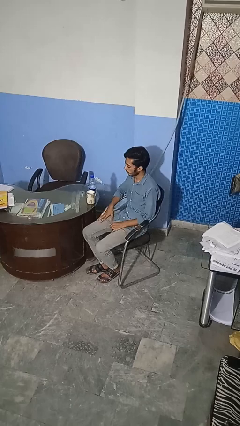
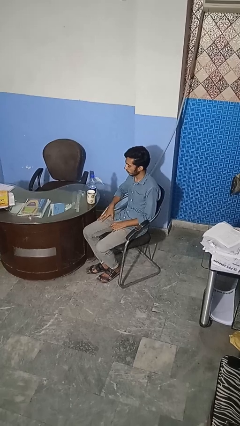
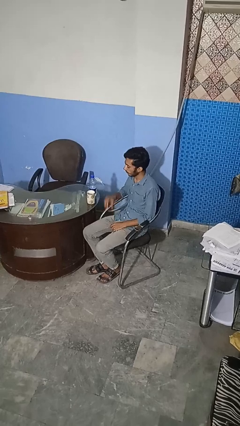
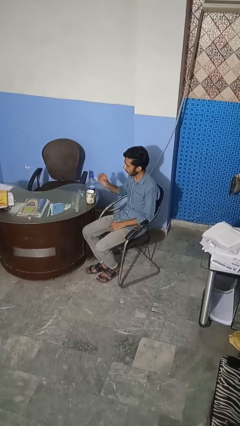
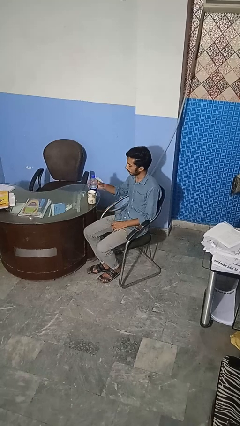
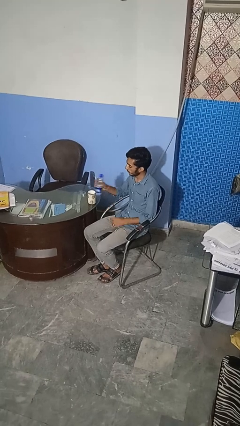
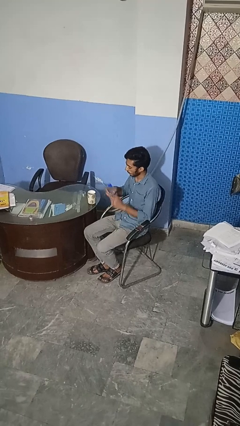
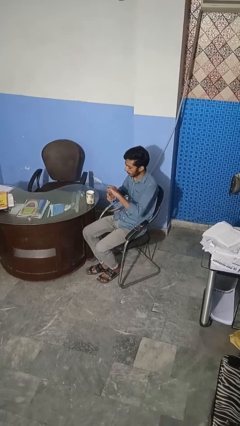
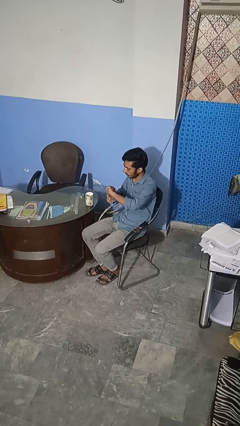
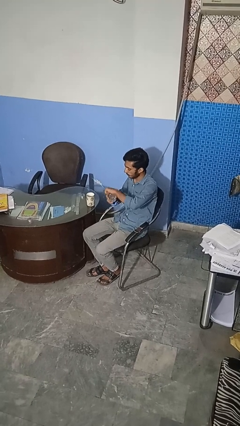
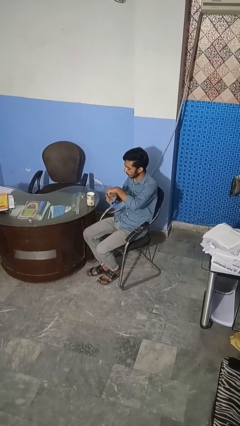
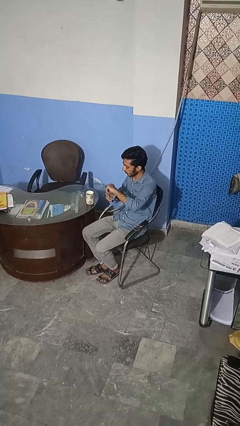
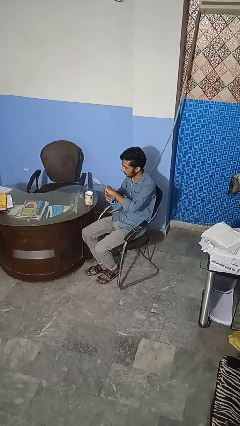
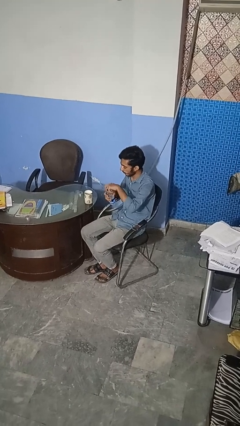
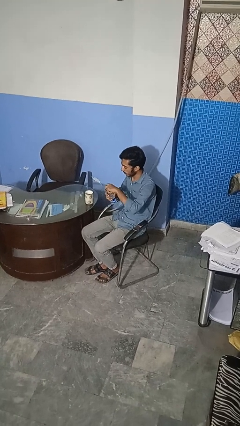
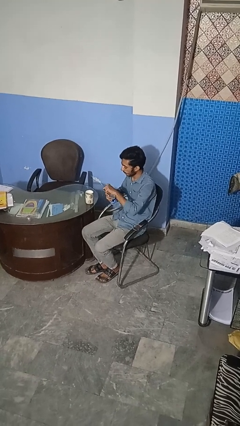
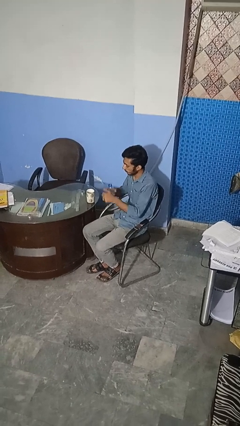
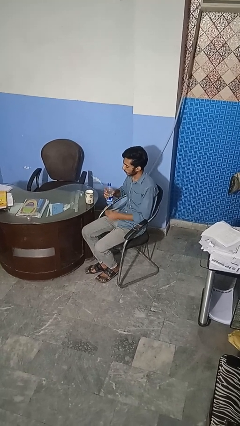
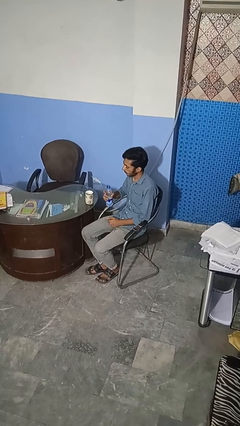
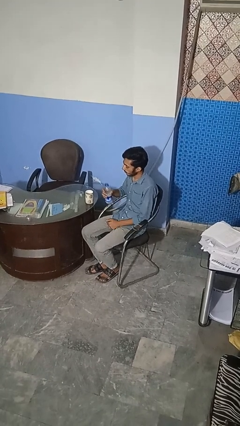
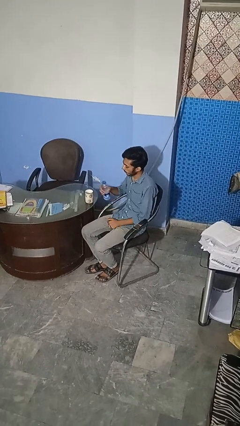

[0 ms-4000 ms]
person unscrews lid from bottle

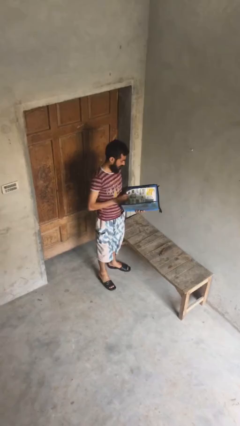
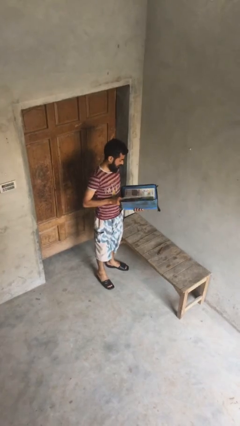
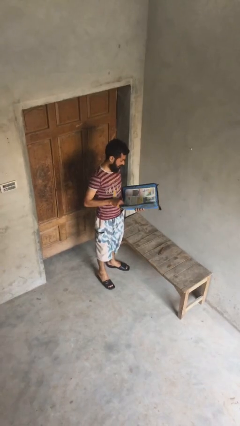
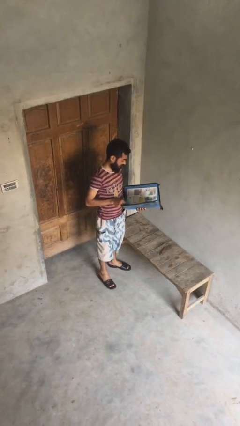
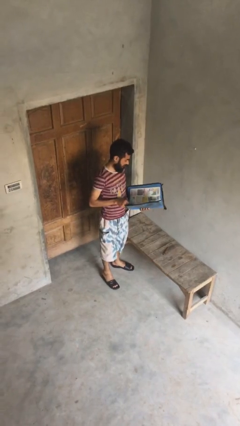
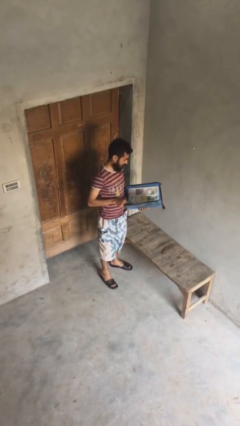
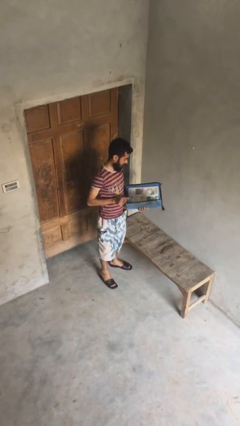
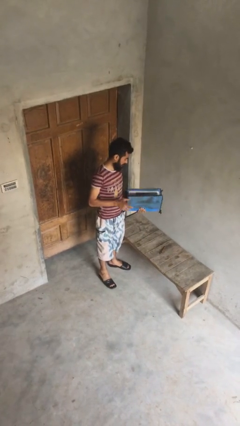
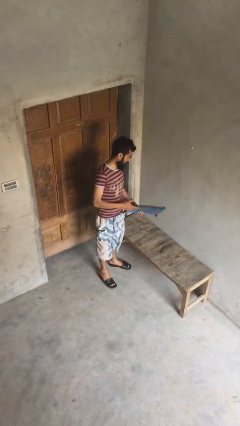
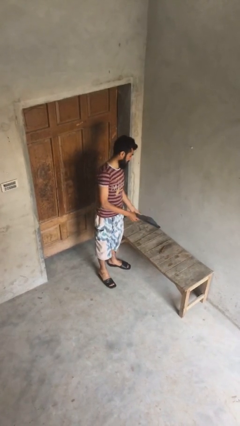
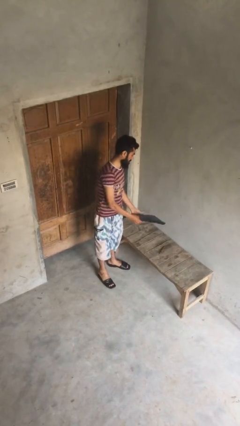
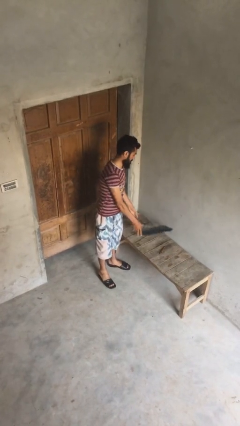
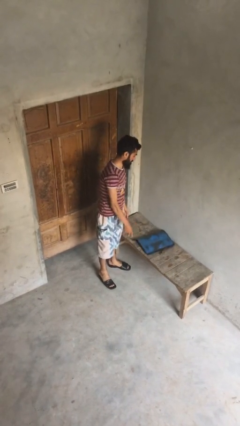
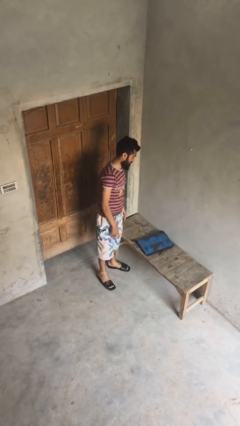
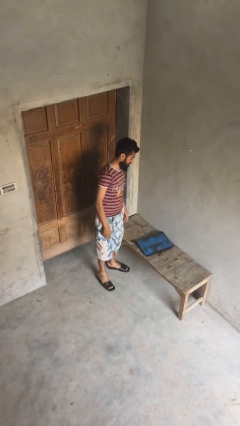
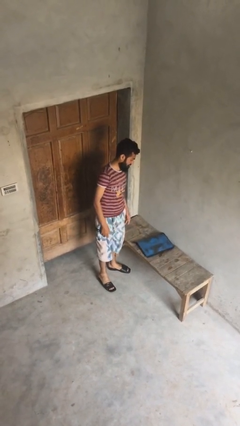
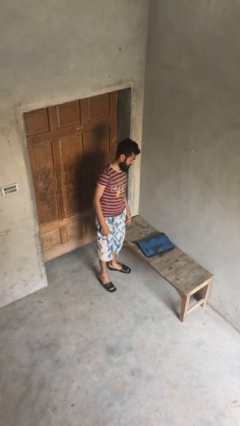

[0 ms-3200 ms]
person puts down object on table

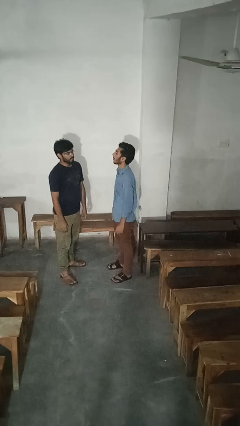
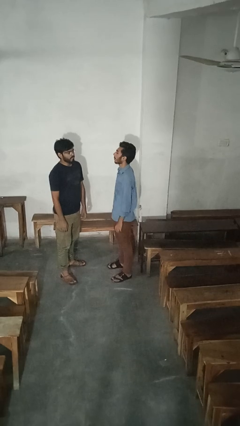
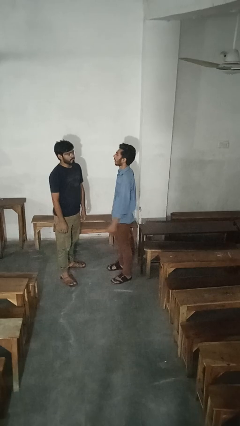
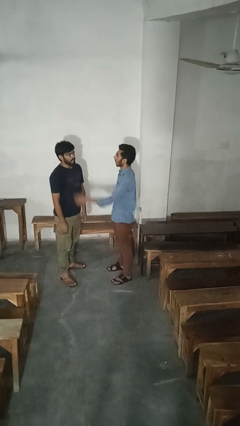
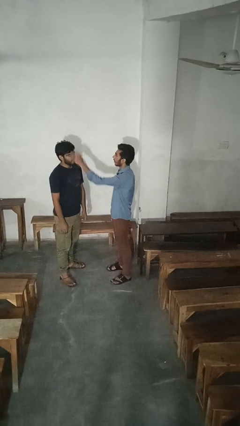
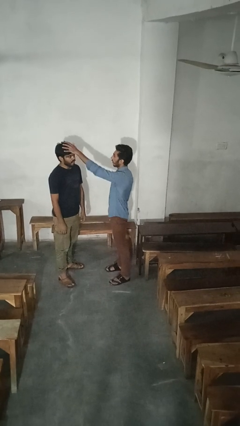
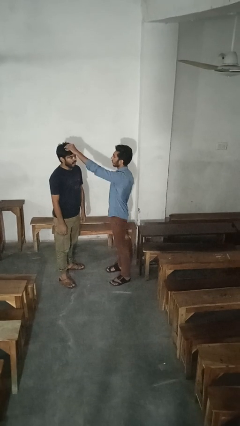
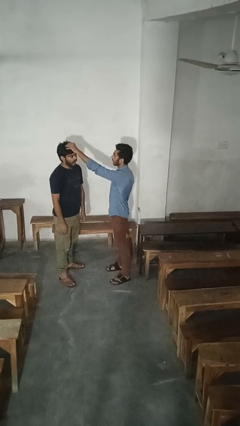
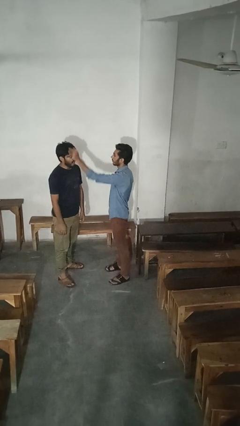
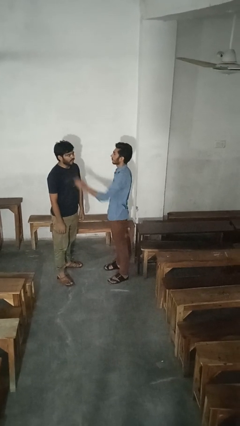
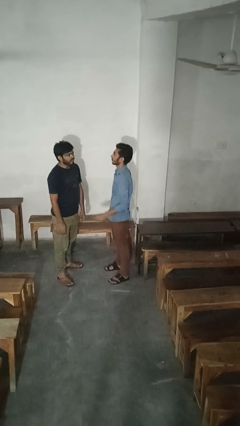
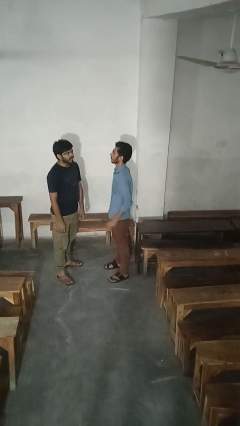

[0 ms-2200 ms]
person grabs person by hair

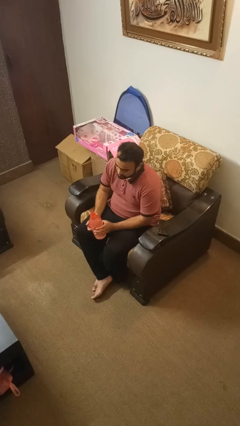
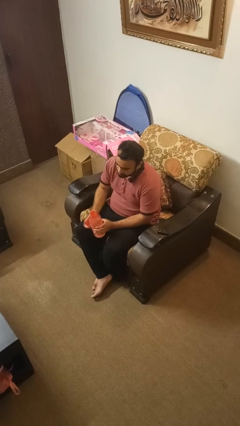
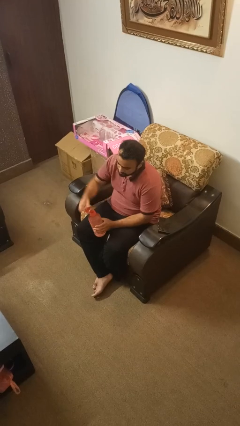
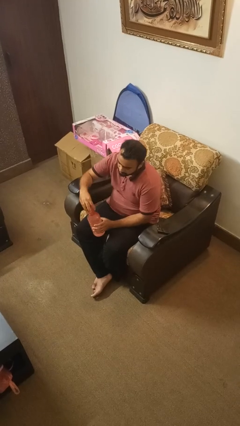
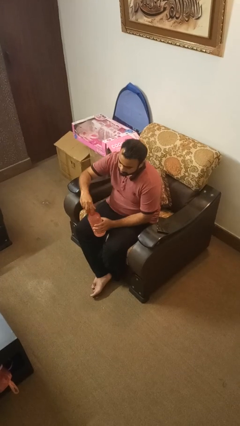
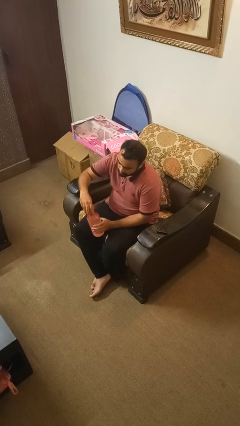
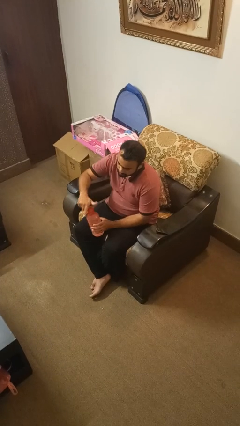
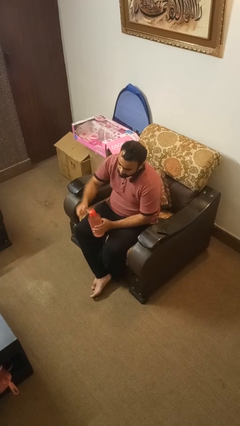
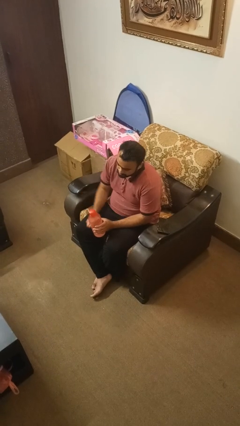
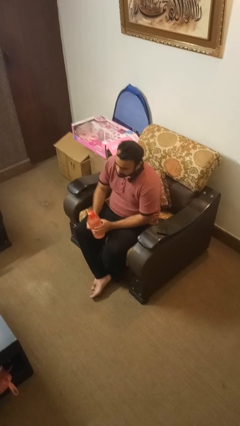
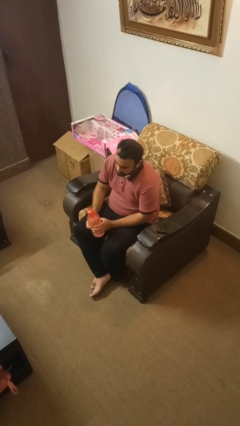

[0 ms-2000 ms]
person screws lid to bottle

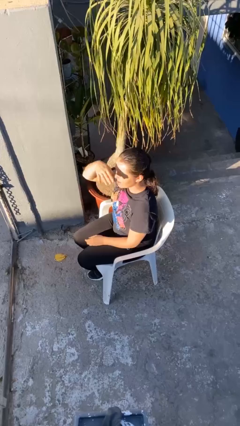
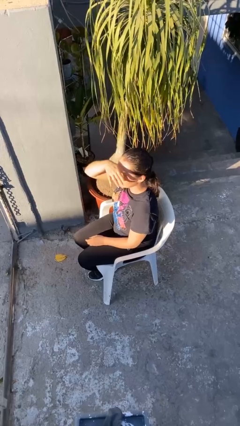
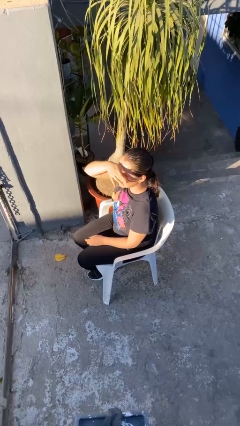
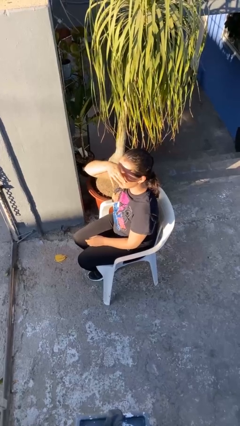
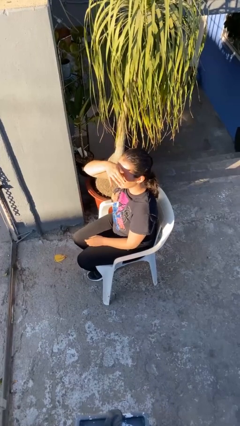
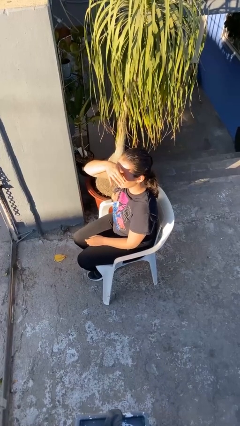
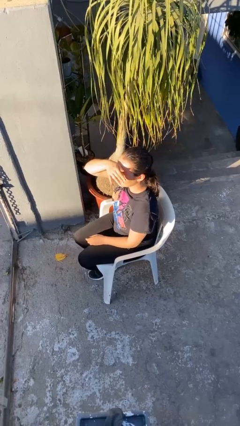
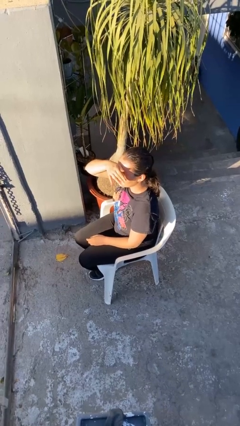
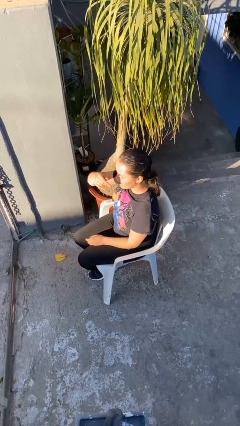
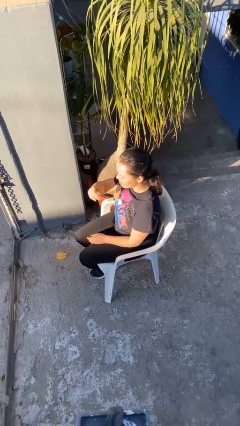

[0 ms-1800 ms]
person shades eyes

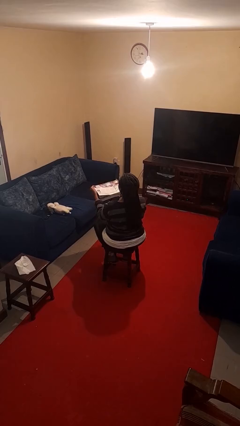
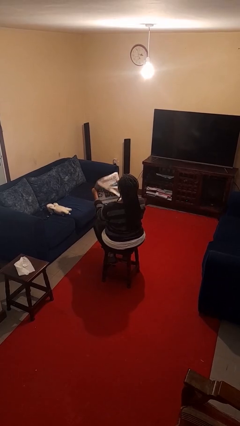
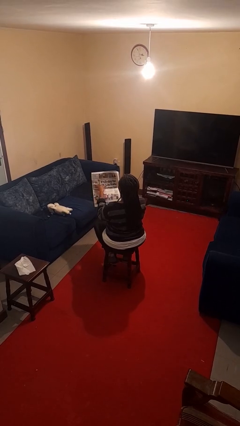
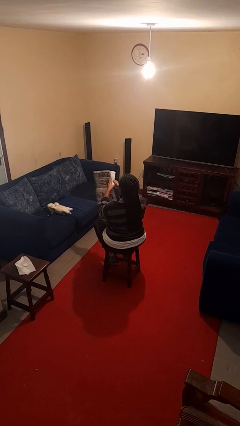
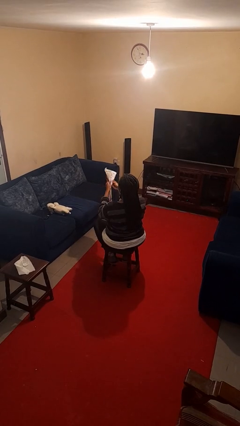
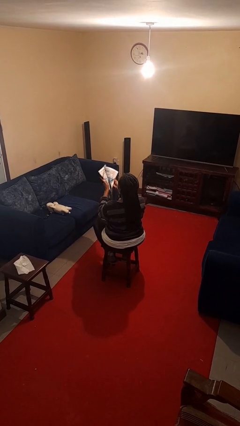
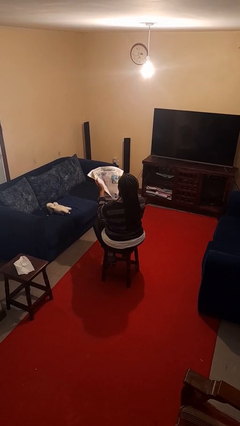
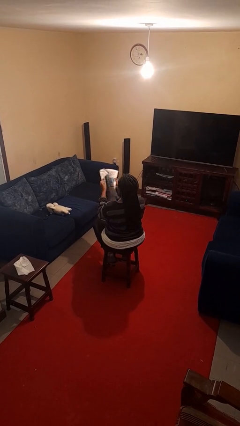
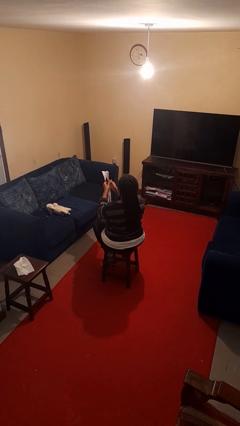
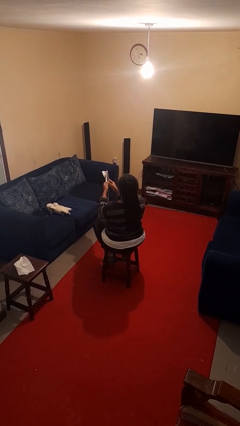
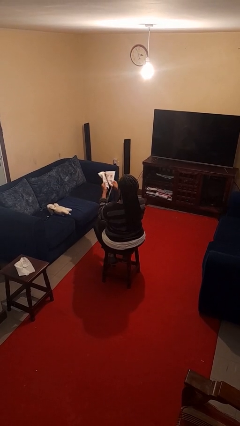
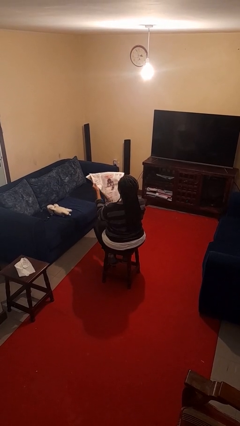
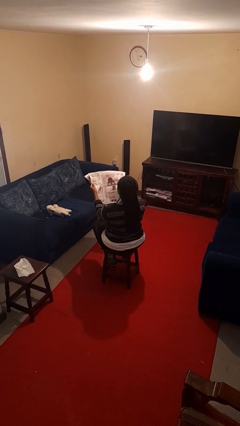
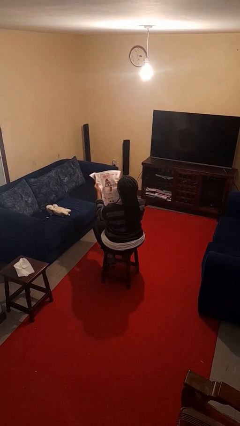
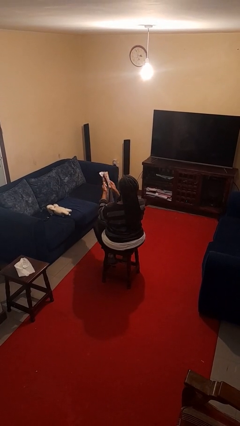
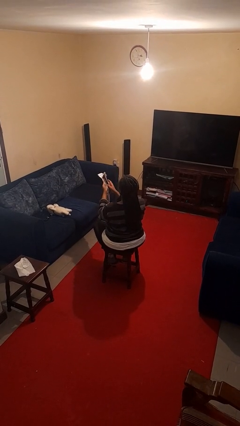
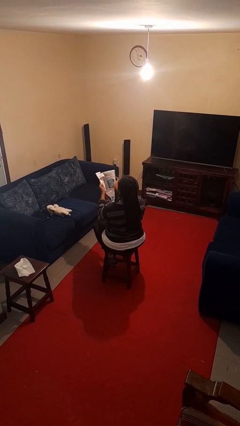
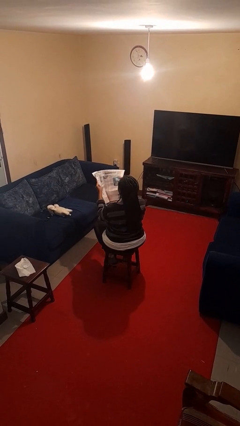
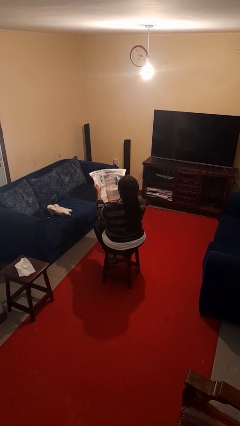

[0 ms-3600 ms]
person reads newspaper

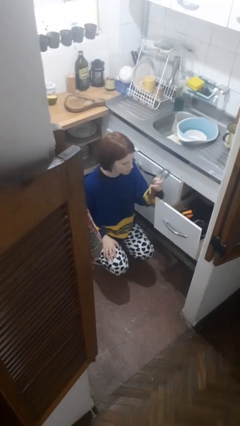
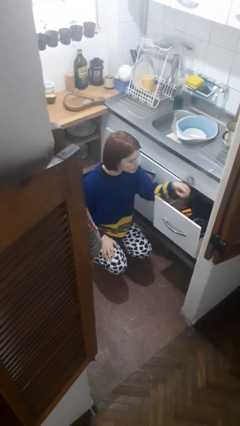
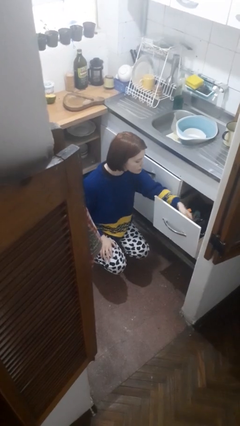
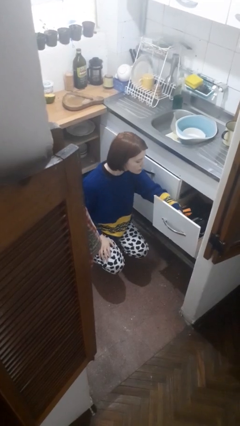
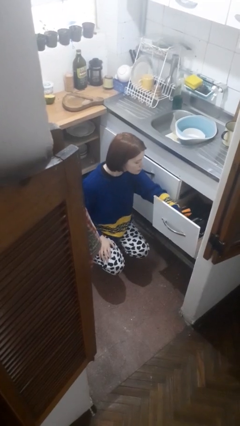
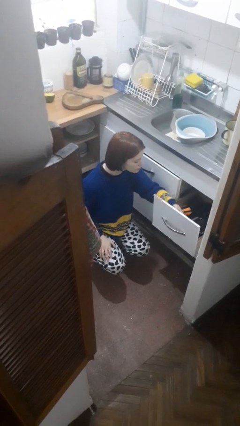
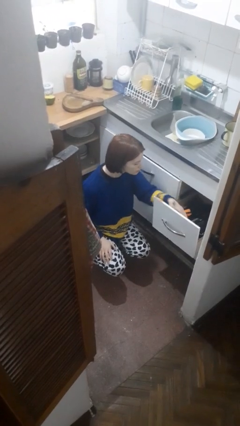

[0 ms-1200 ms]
person puts object into kitchen drawer
